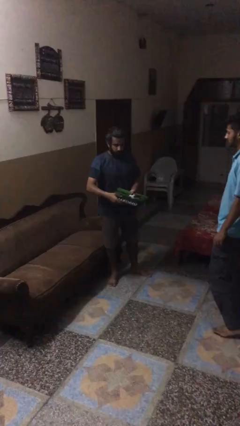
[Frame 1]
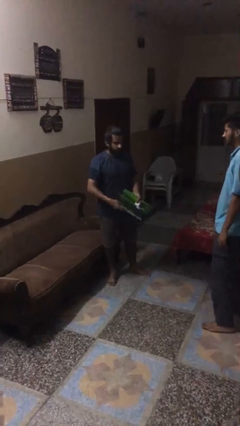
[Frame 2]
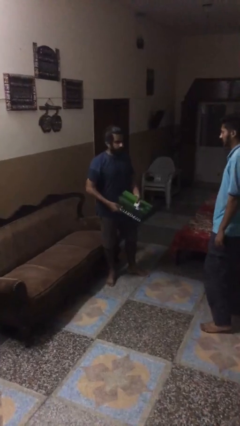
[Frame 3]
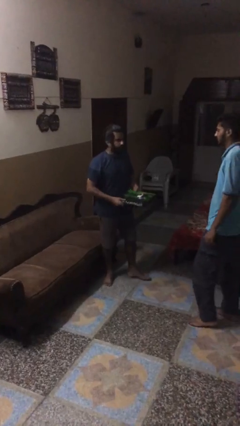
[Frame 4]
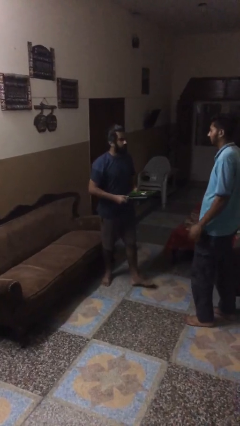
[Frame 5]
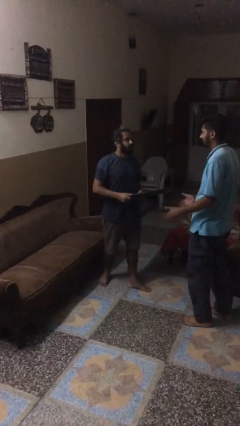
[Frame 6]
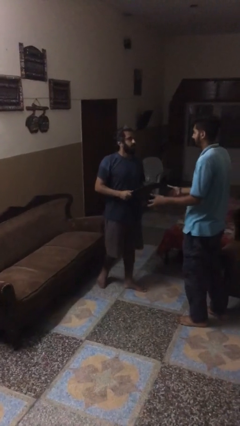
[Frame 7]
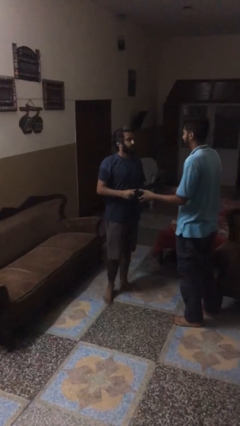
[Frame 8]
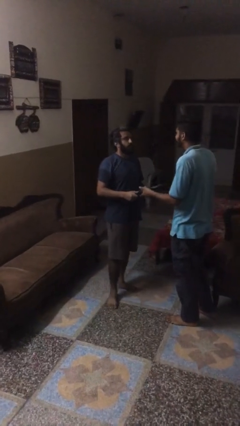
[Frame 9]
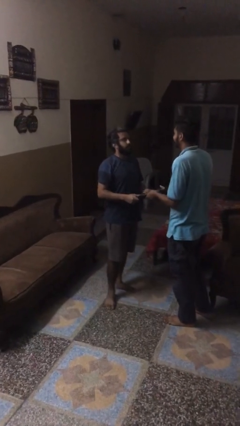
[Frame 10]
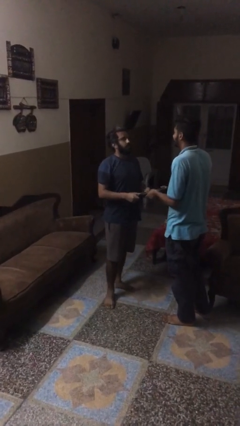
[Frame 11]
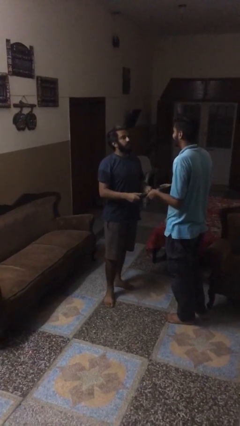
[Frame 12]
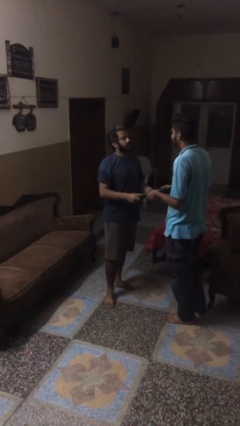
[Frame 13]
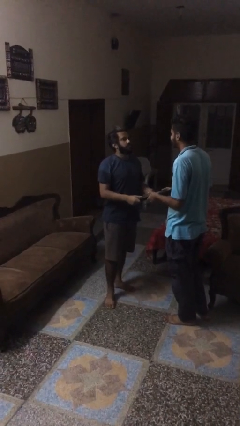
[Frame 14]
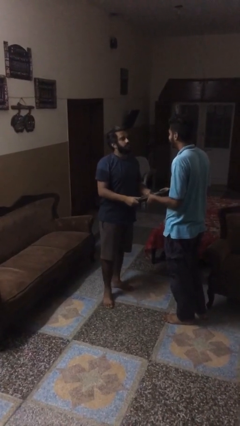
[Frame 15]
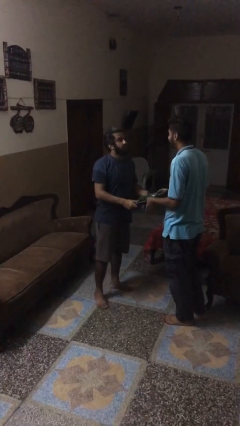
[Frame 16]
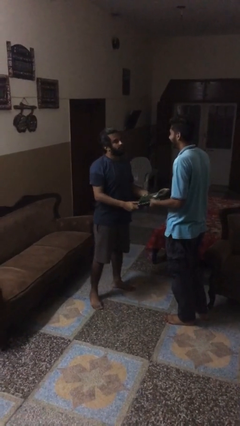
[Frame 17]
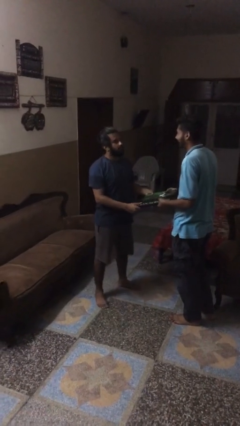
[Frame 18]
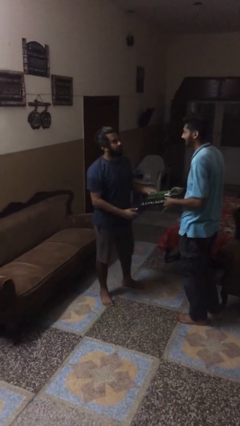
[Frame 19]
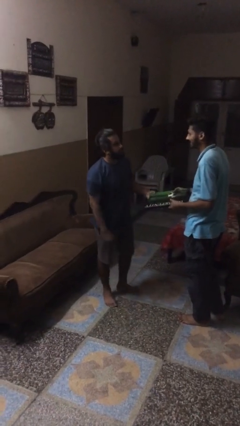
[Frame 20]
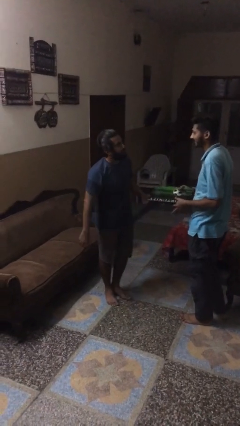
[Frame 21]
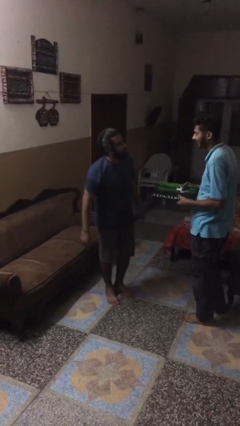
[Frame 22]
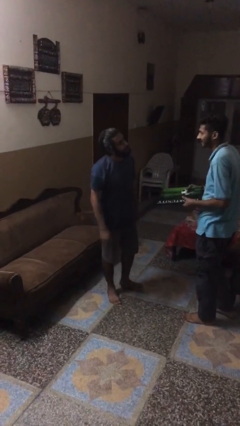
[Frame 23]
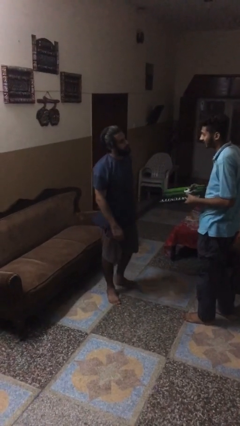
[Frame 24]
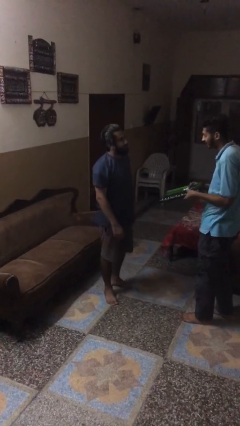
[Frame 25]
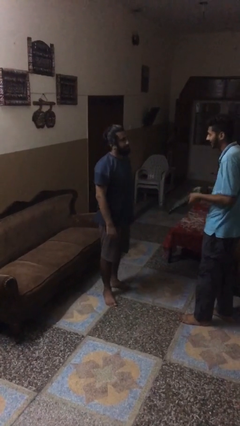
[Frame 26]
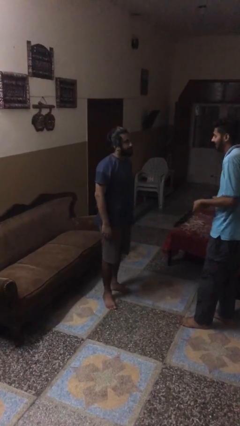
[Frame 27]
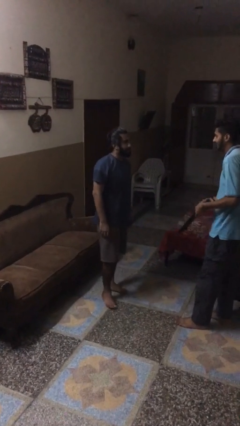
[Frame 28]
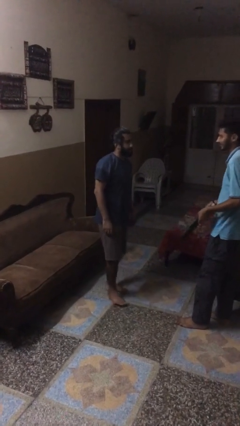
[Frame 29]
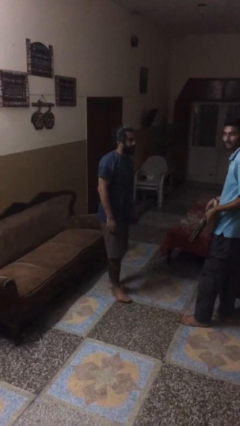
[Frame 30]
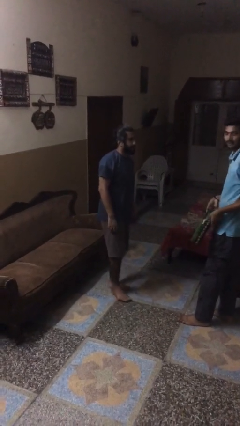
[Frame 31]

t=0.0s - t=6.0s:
person transfers object to person

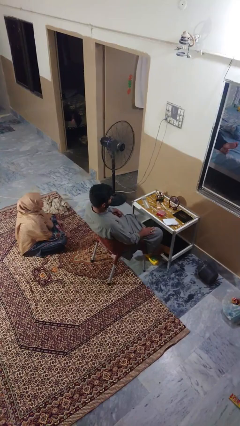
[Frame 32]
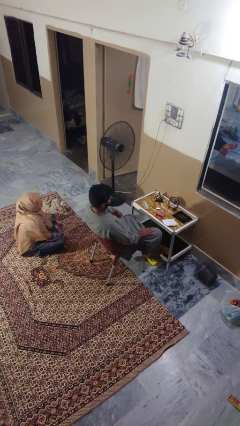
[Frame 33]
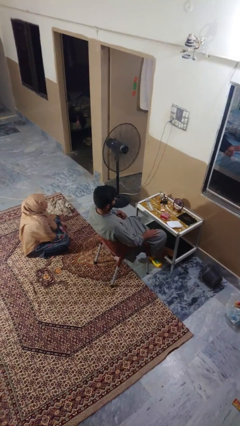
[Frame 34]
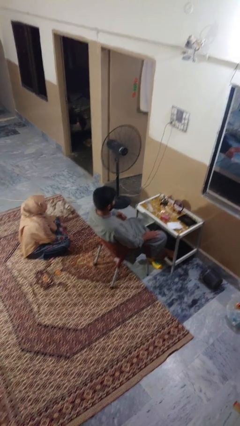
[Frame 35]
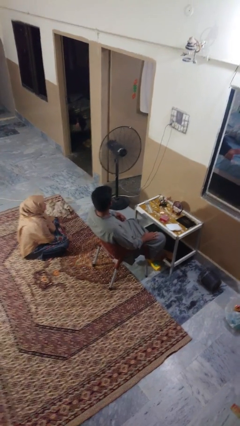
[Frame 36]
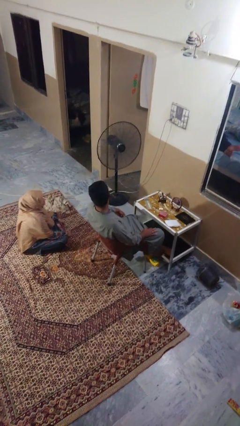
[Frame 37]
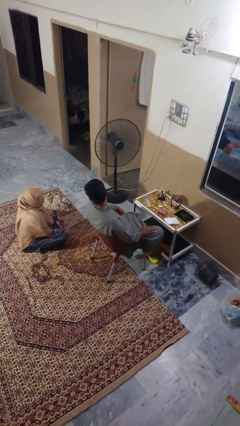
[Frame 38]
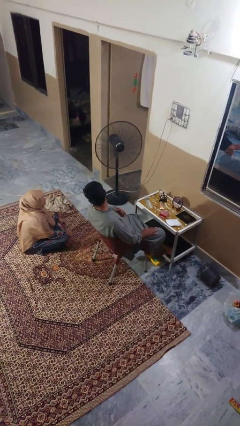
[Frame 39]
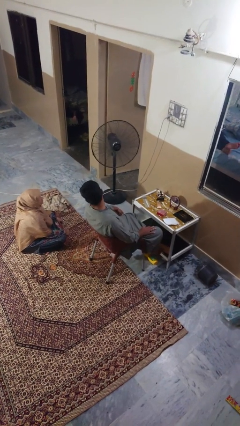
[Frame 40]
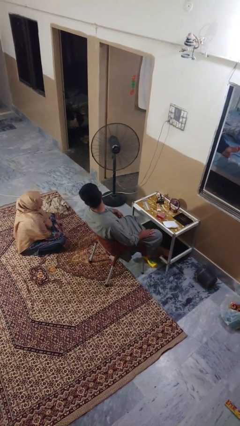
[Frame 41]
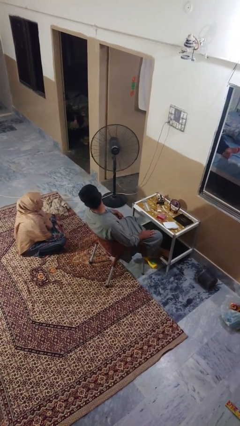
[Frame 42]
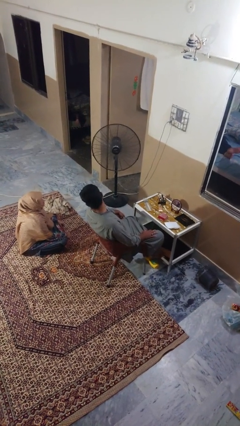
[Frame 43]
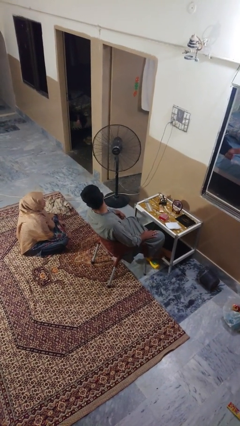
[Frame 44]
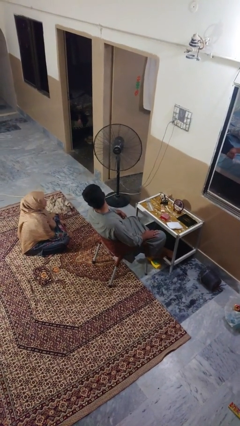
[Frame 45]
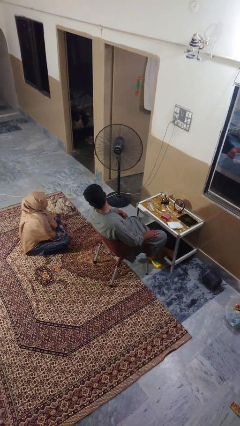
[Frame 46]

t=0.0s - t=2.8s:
person looks over shoulder

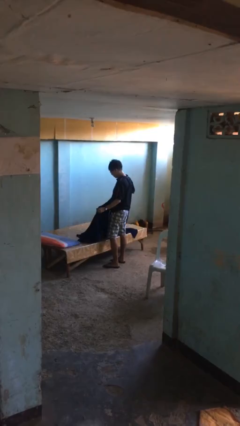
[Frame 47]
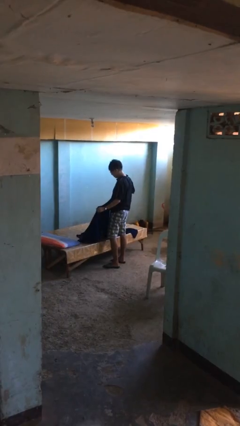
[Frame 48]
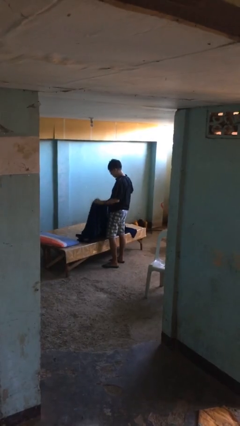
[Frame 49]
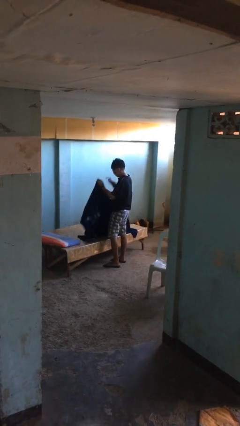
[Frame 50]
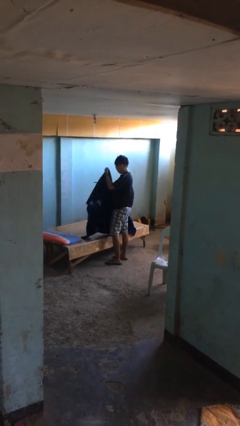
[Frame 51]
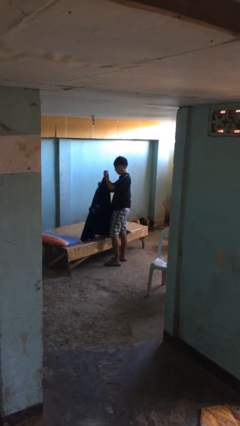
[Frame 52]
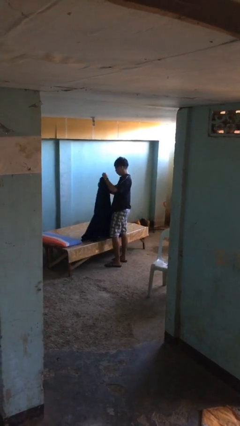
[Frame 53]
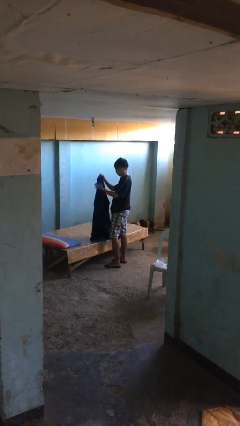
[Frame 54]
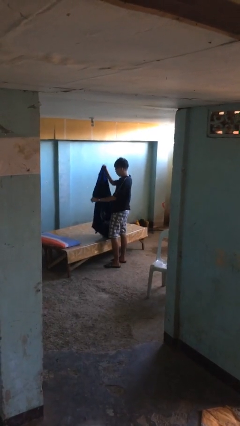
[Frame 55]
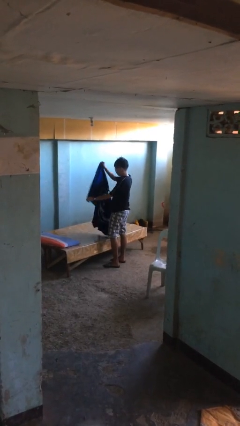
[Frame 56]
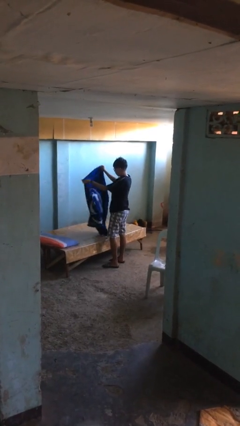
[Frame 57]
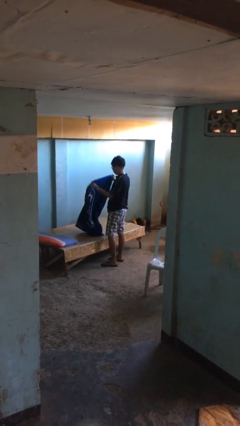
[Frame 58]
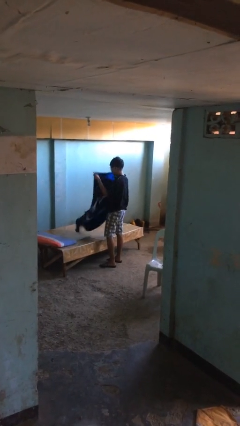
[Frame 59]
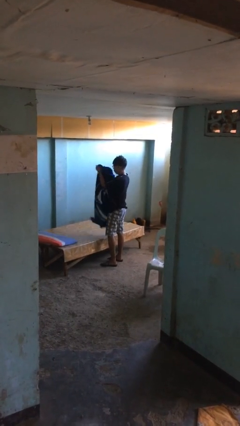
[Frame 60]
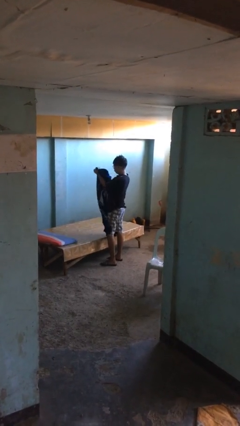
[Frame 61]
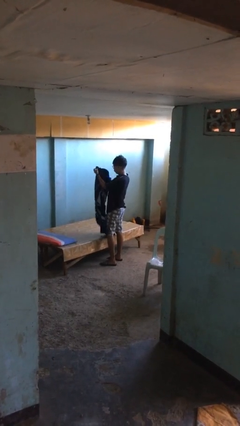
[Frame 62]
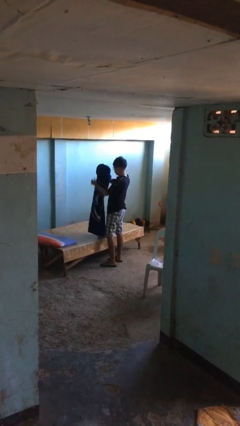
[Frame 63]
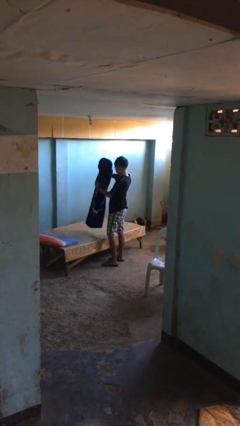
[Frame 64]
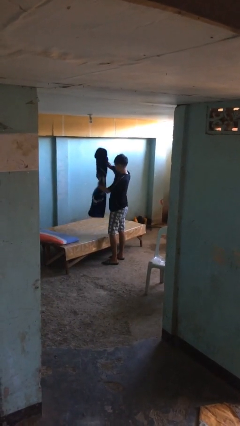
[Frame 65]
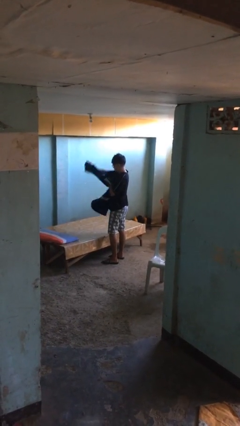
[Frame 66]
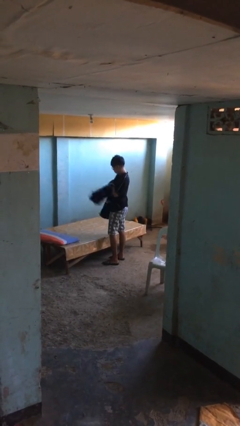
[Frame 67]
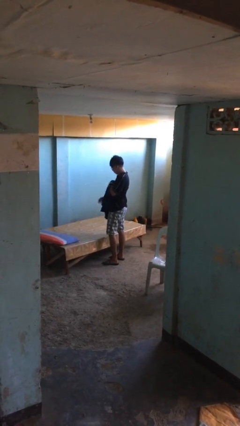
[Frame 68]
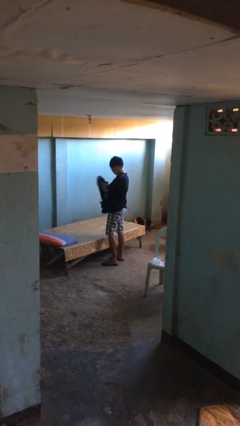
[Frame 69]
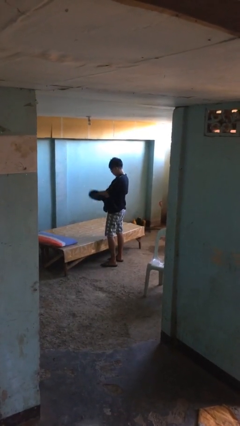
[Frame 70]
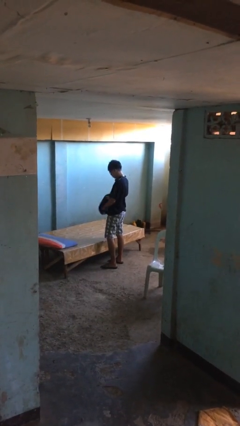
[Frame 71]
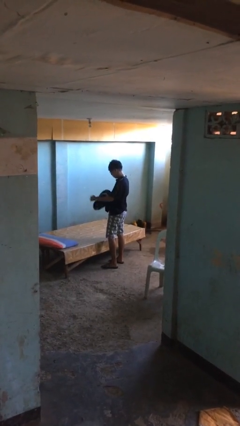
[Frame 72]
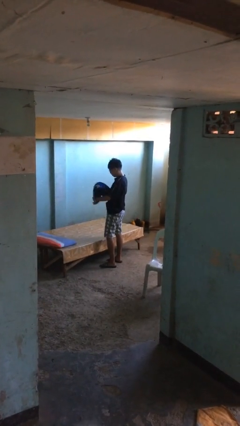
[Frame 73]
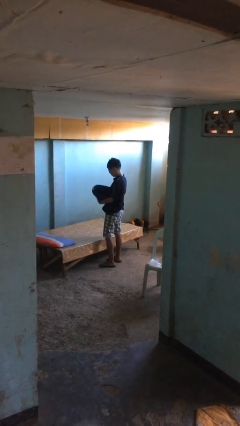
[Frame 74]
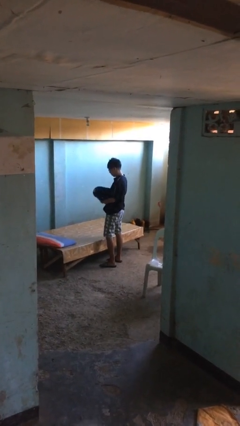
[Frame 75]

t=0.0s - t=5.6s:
person folds blanket

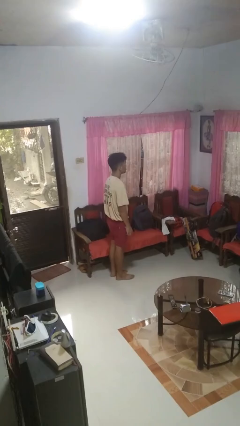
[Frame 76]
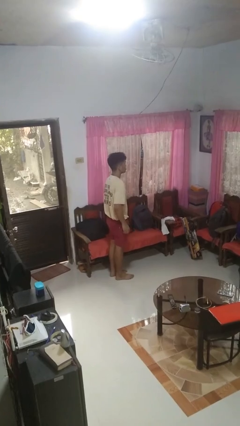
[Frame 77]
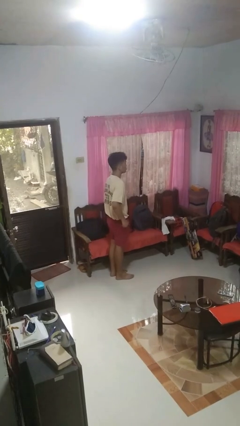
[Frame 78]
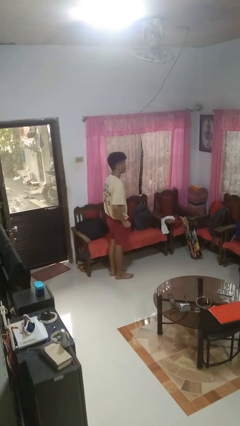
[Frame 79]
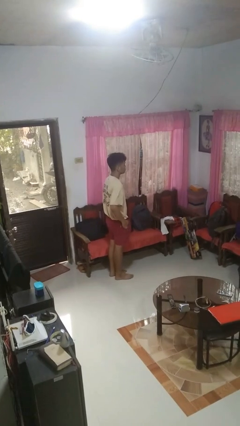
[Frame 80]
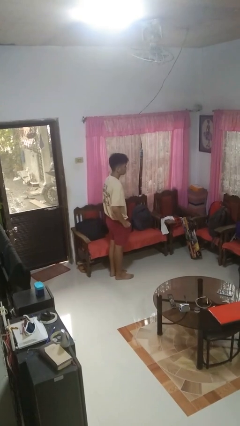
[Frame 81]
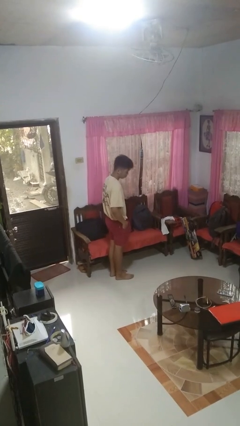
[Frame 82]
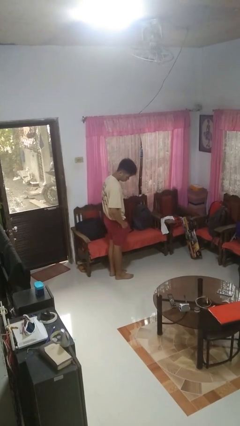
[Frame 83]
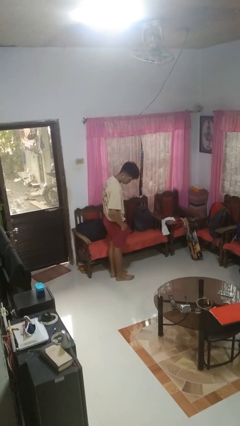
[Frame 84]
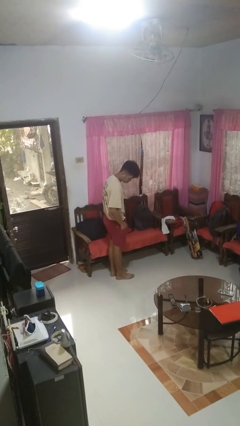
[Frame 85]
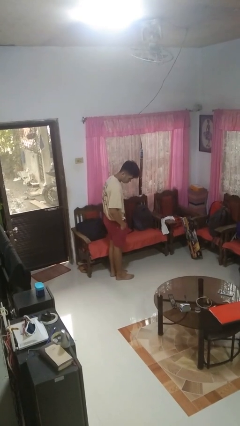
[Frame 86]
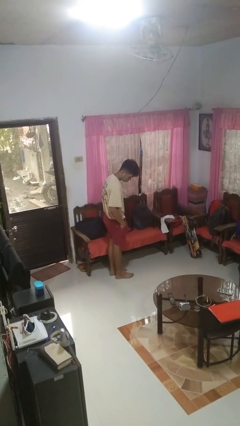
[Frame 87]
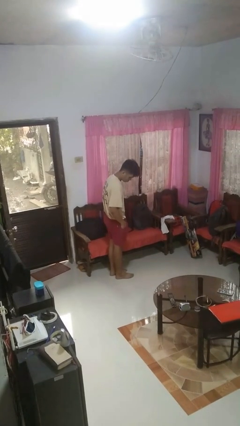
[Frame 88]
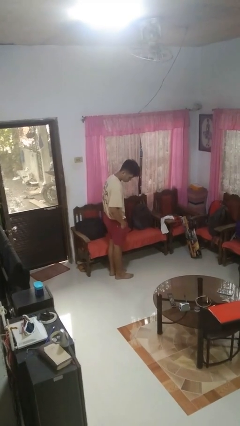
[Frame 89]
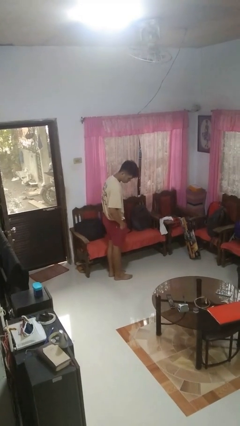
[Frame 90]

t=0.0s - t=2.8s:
person puts hands in back pockets

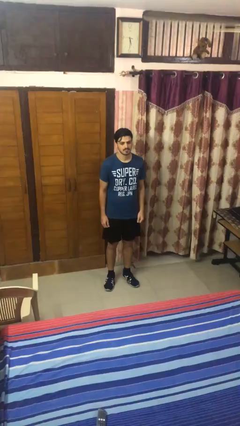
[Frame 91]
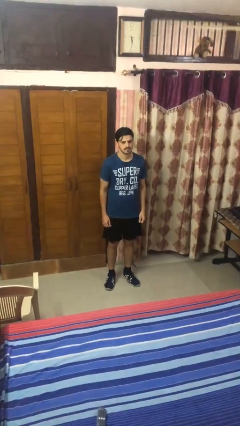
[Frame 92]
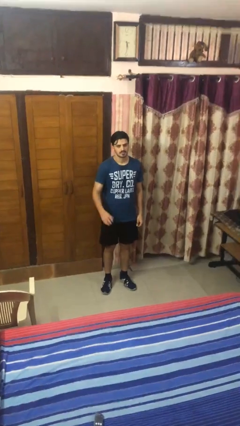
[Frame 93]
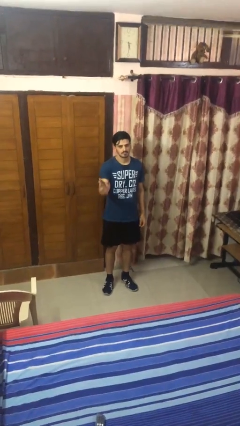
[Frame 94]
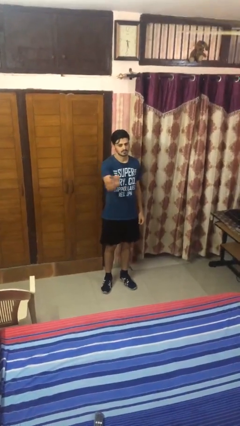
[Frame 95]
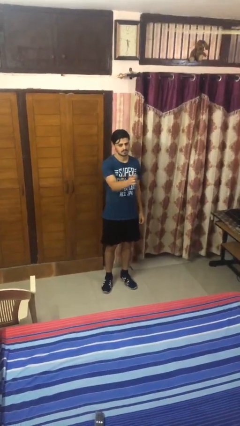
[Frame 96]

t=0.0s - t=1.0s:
person gestures swipe left
